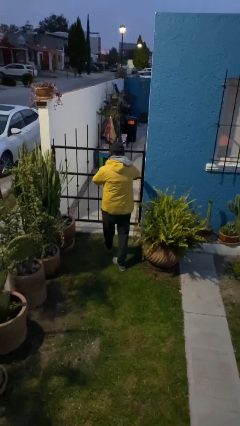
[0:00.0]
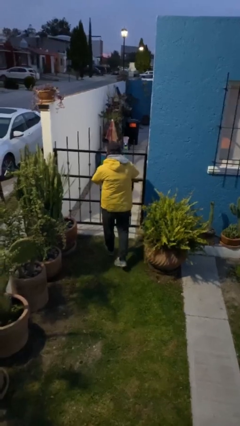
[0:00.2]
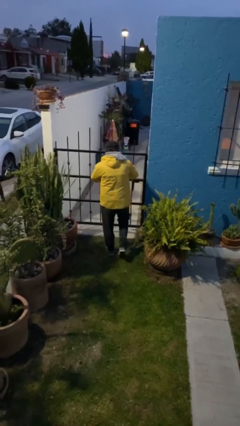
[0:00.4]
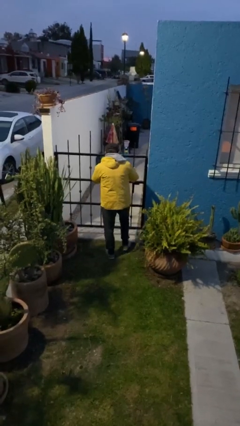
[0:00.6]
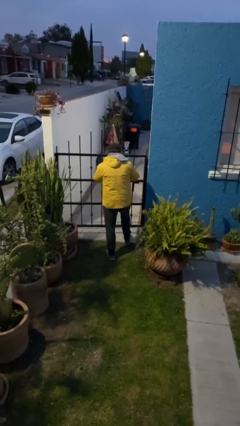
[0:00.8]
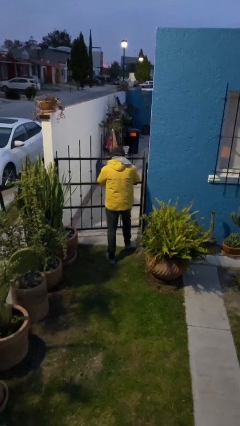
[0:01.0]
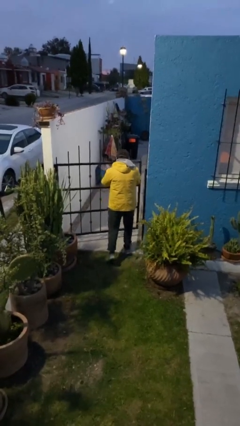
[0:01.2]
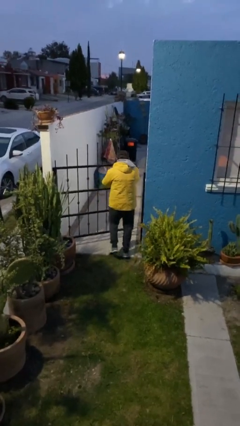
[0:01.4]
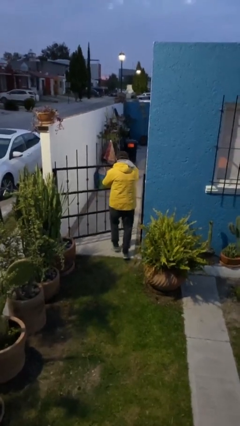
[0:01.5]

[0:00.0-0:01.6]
person opens facility door

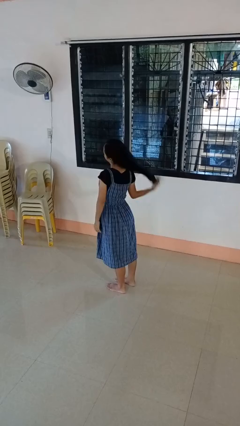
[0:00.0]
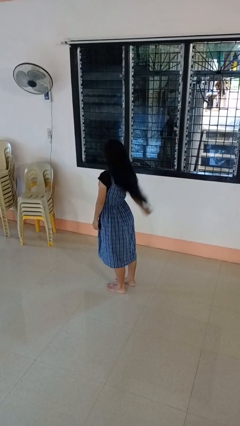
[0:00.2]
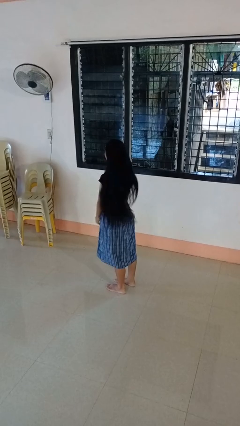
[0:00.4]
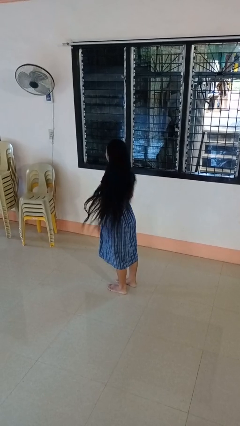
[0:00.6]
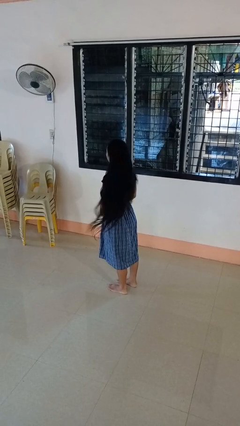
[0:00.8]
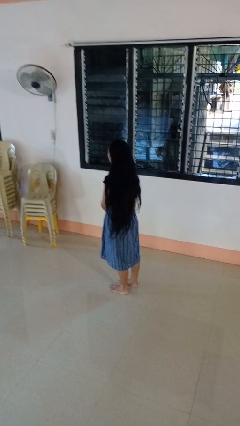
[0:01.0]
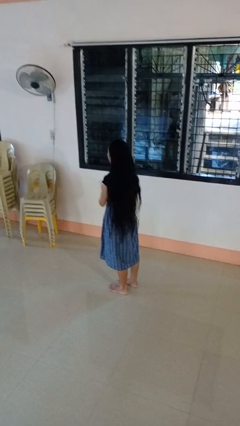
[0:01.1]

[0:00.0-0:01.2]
person takes off hairtie

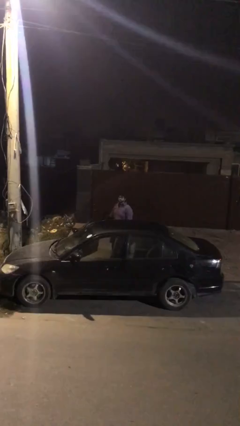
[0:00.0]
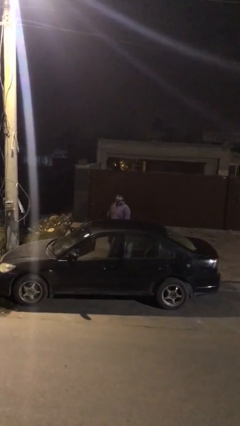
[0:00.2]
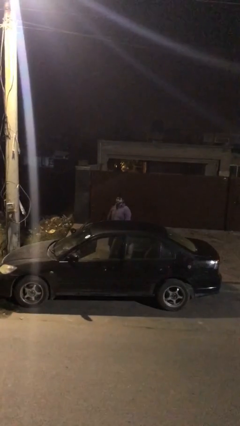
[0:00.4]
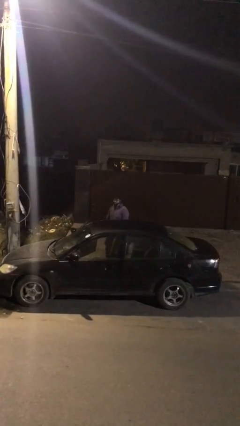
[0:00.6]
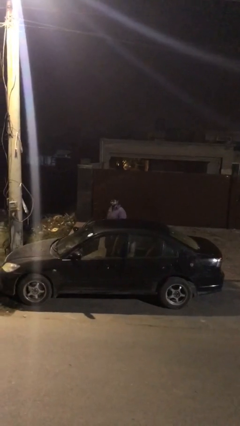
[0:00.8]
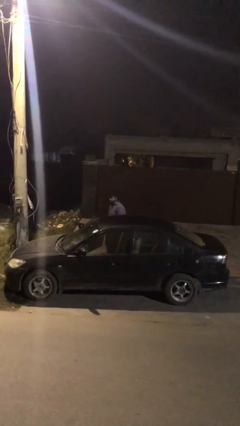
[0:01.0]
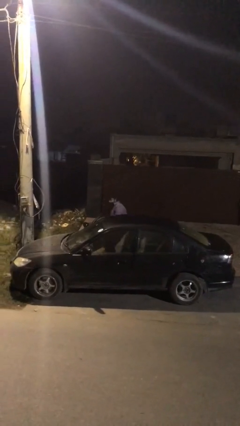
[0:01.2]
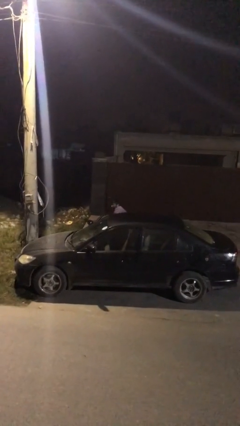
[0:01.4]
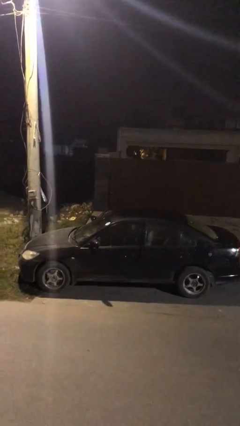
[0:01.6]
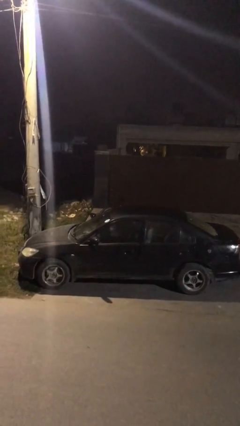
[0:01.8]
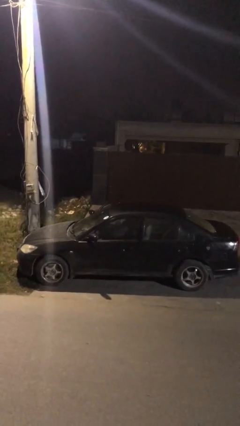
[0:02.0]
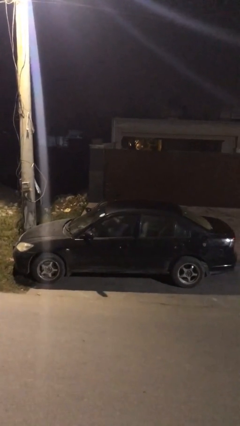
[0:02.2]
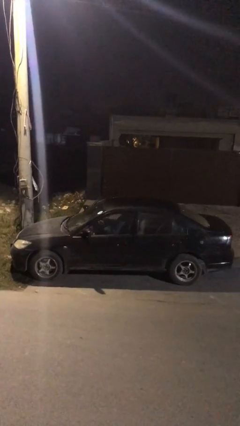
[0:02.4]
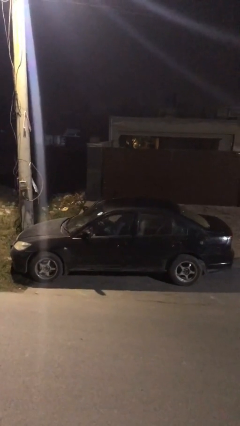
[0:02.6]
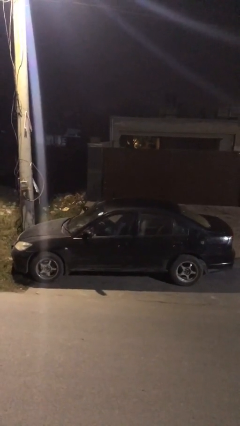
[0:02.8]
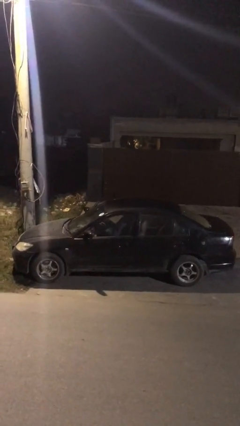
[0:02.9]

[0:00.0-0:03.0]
person enters car

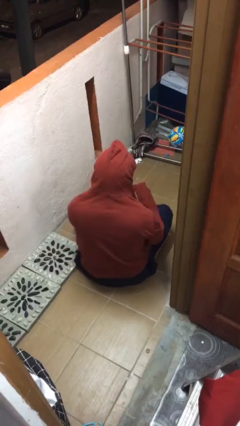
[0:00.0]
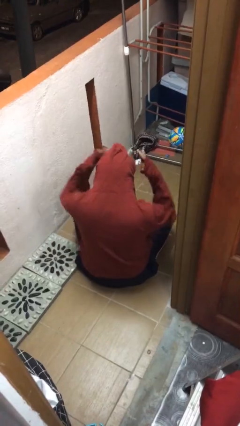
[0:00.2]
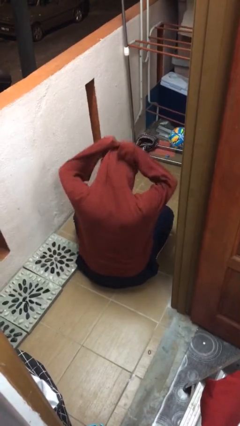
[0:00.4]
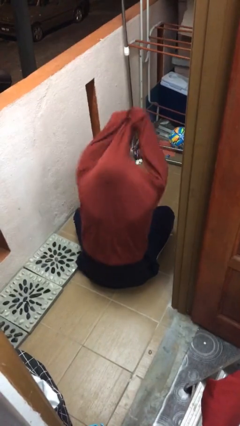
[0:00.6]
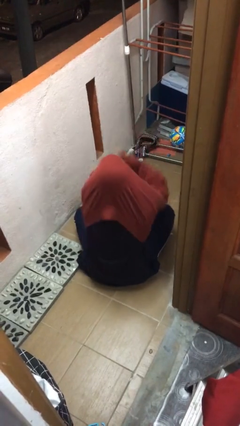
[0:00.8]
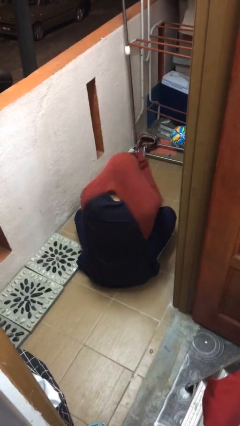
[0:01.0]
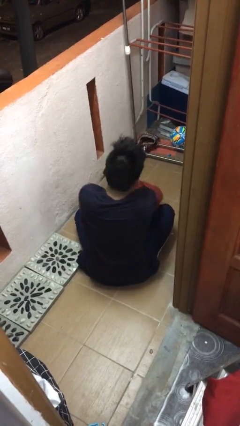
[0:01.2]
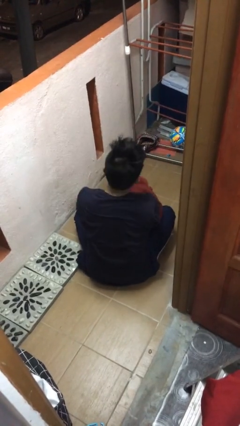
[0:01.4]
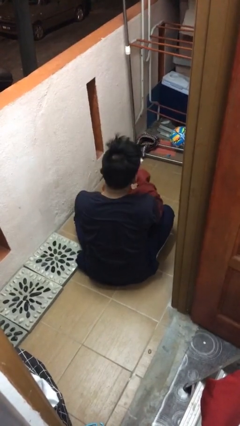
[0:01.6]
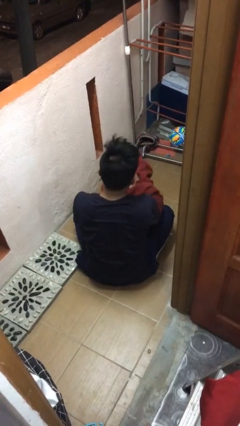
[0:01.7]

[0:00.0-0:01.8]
person takes off hoodie

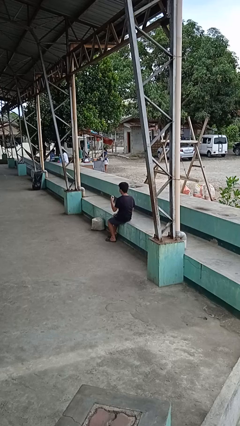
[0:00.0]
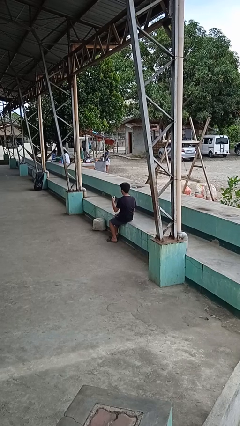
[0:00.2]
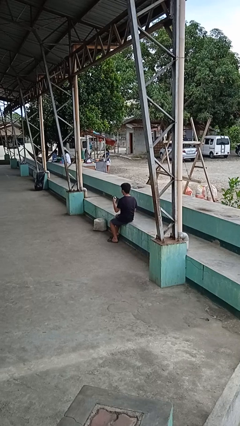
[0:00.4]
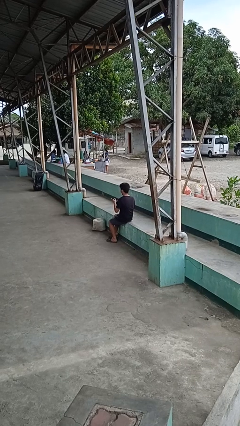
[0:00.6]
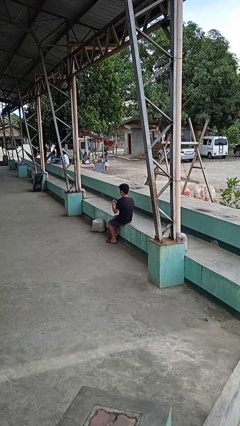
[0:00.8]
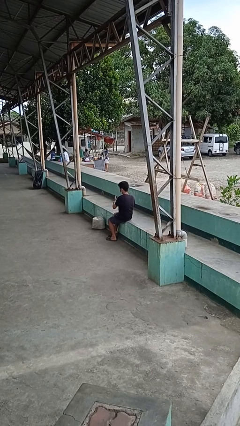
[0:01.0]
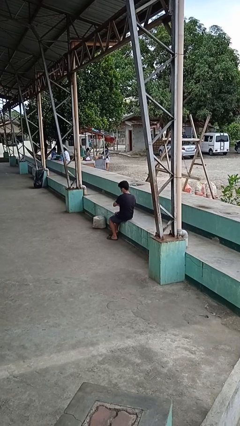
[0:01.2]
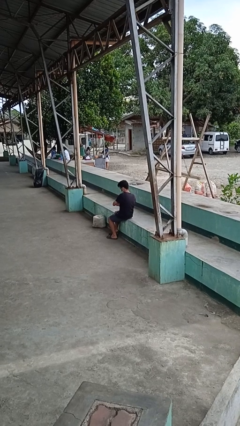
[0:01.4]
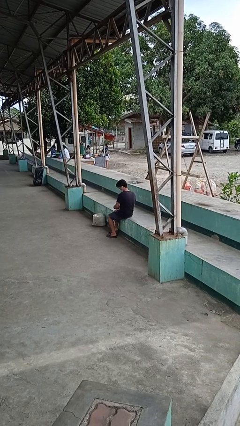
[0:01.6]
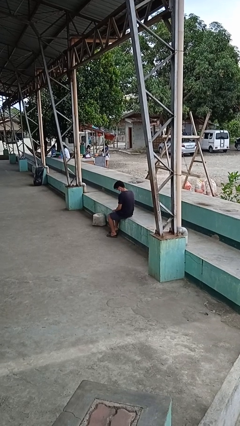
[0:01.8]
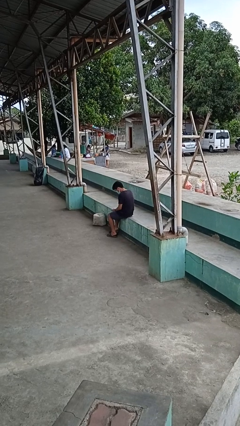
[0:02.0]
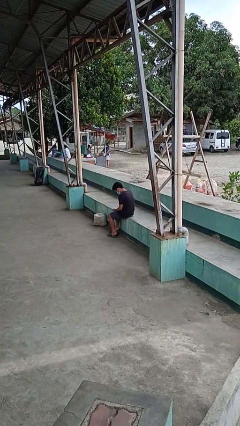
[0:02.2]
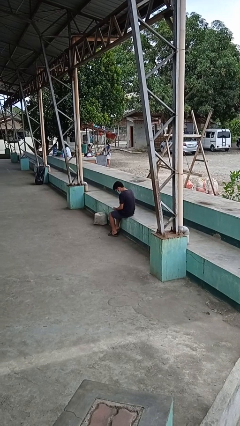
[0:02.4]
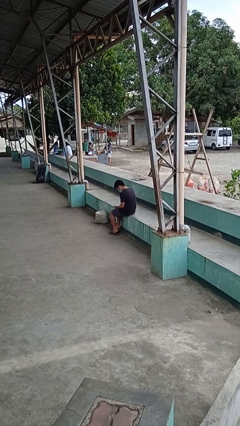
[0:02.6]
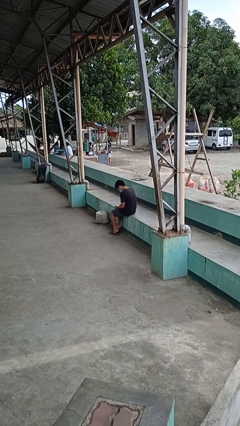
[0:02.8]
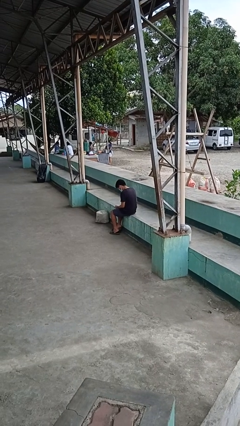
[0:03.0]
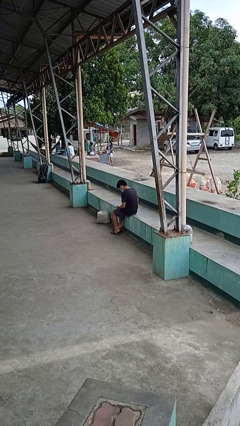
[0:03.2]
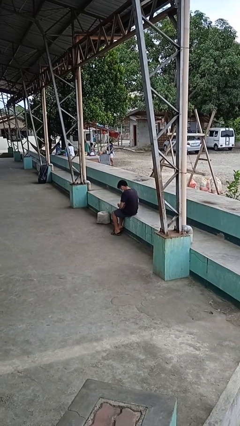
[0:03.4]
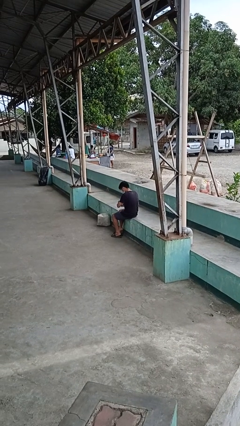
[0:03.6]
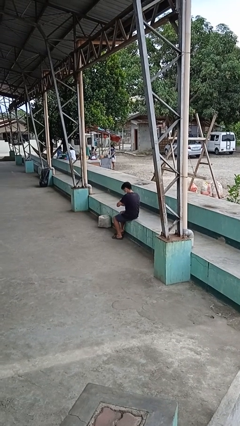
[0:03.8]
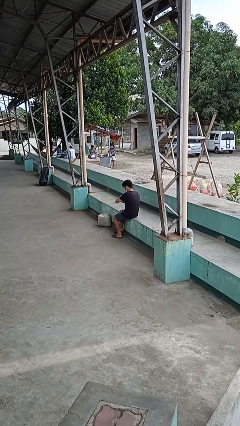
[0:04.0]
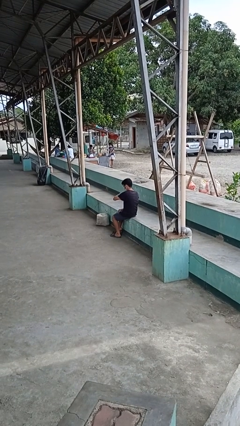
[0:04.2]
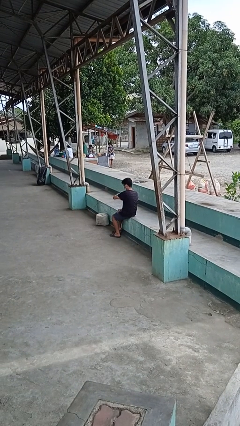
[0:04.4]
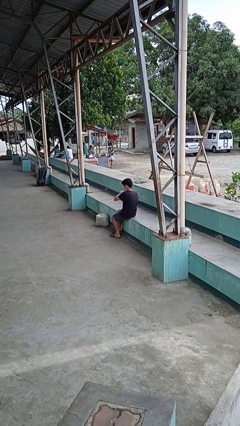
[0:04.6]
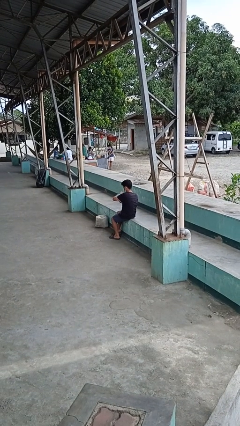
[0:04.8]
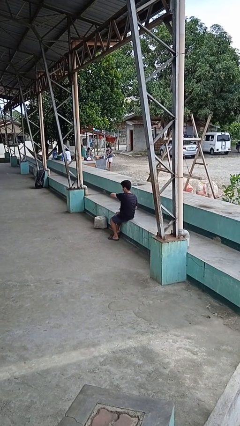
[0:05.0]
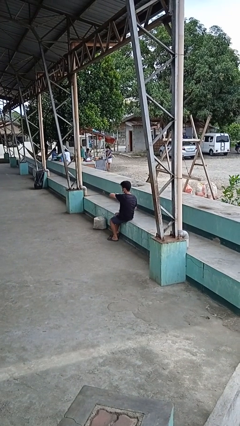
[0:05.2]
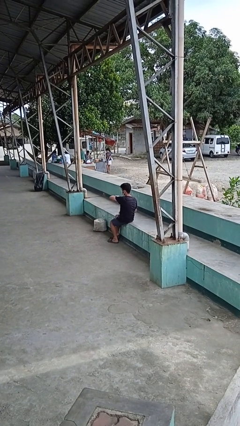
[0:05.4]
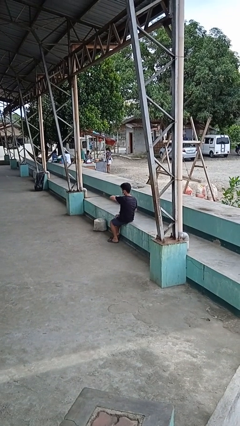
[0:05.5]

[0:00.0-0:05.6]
person puts on wristwatch

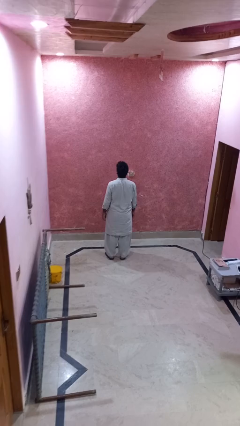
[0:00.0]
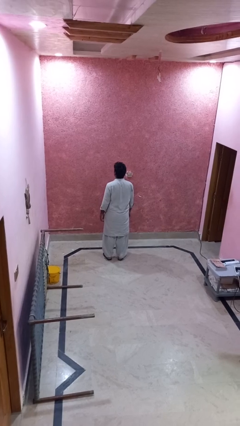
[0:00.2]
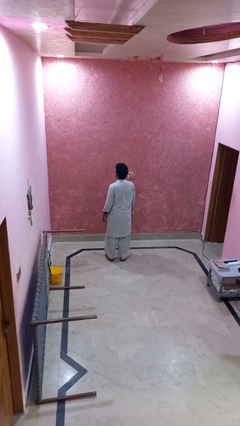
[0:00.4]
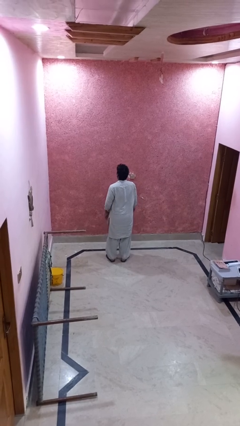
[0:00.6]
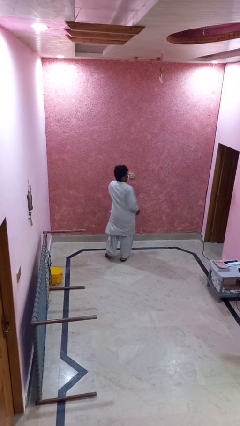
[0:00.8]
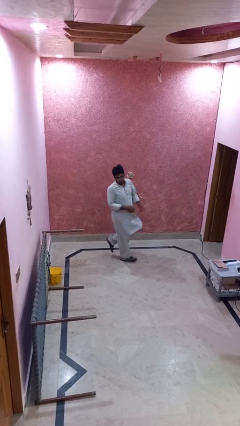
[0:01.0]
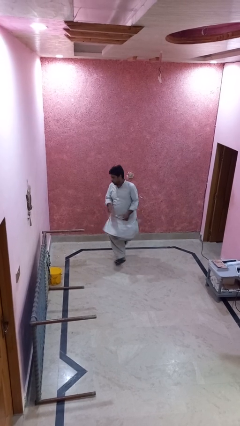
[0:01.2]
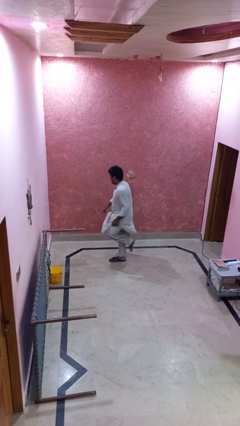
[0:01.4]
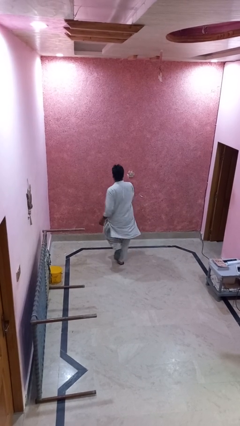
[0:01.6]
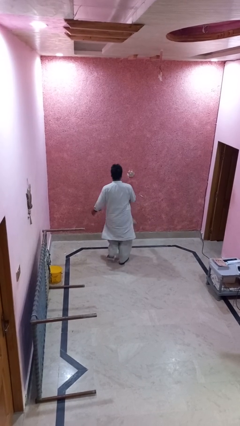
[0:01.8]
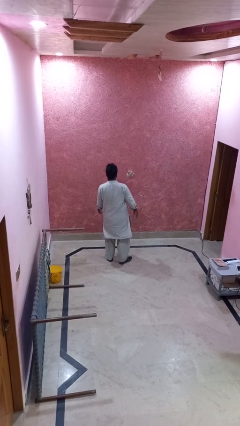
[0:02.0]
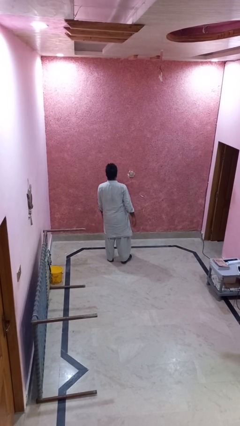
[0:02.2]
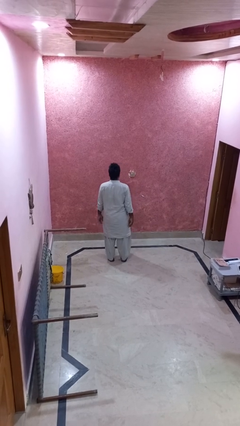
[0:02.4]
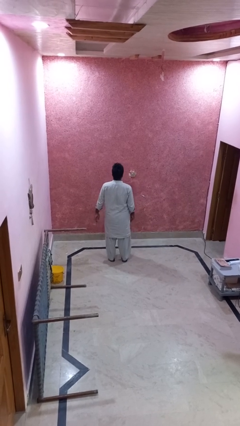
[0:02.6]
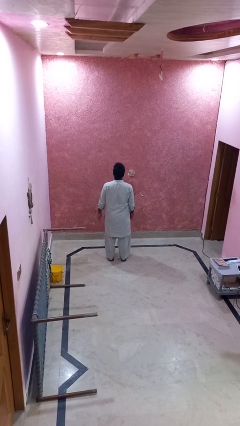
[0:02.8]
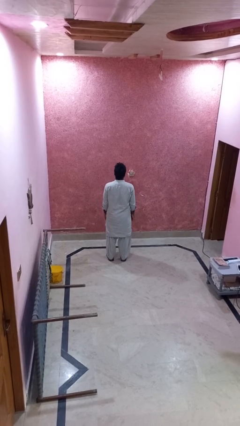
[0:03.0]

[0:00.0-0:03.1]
person twirls

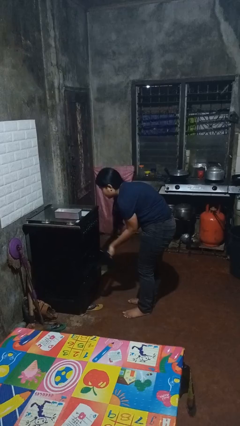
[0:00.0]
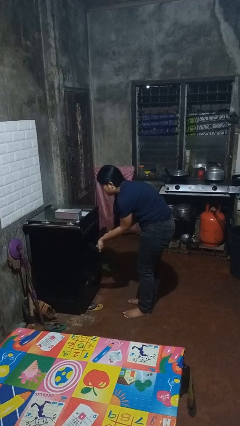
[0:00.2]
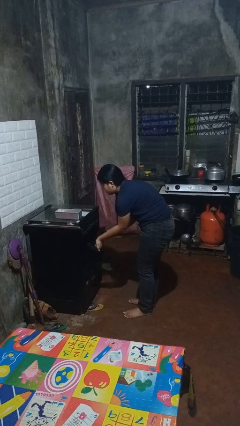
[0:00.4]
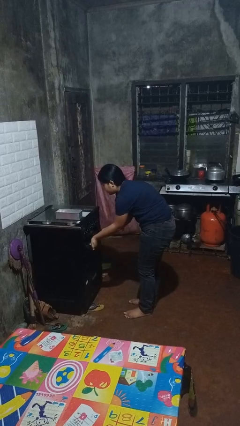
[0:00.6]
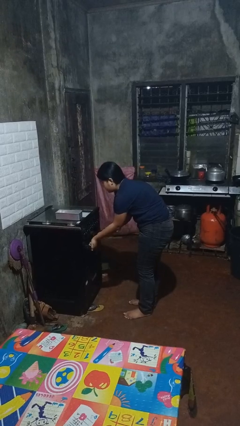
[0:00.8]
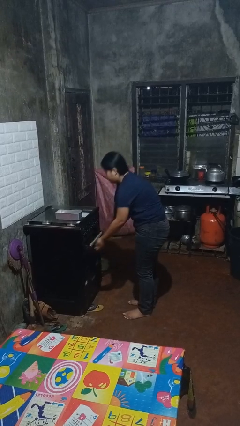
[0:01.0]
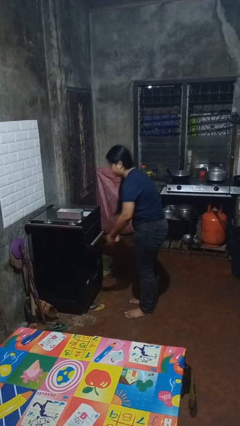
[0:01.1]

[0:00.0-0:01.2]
person closes oven door
